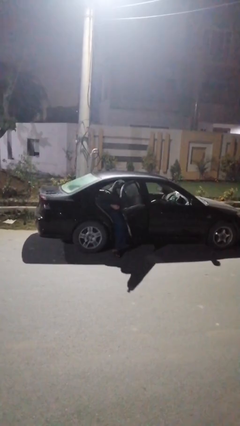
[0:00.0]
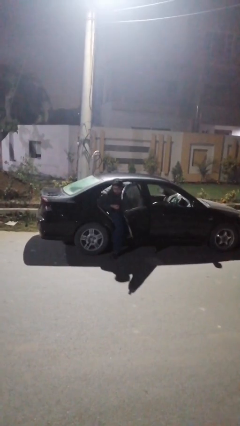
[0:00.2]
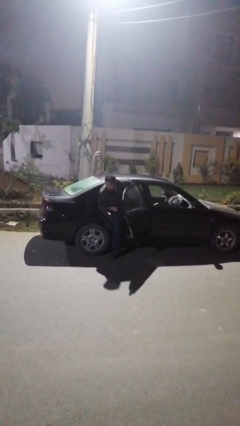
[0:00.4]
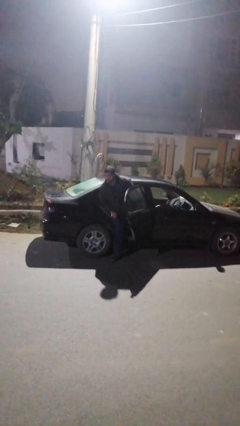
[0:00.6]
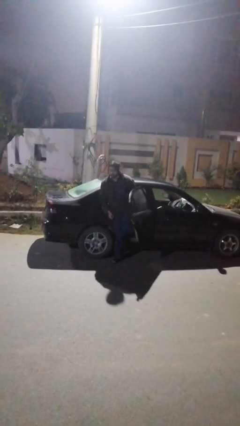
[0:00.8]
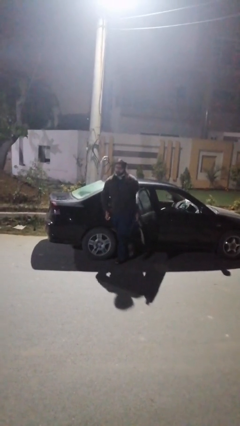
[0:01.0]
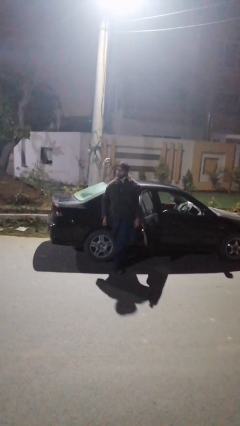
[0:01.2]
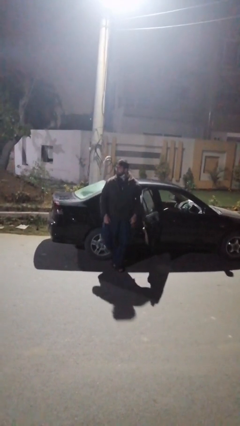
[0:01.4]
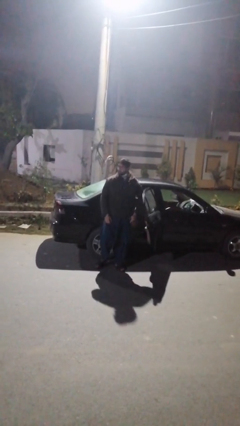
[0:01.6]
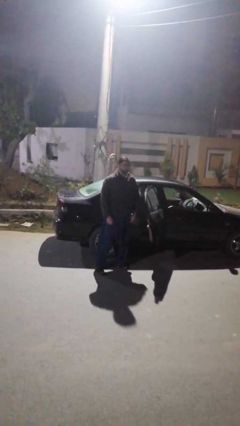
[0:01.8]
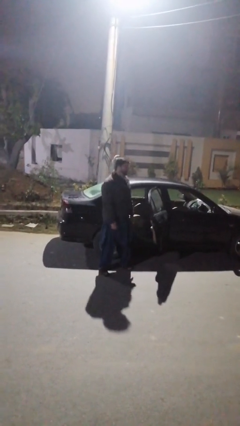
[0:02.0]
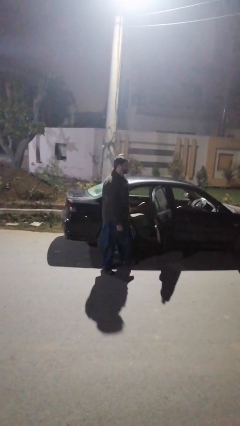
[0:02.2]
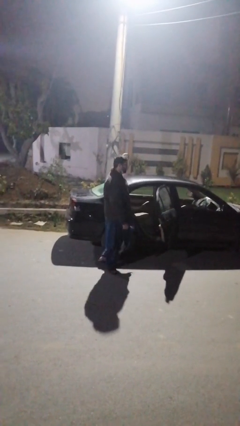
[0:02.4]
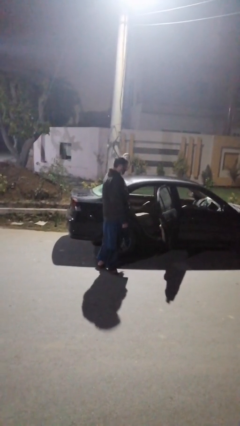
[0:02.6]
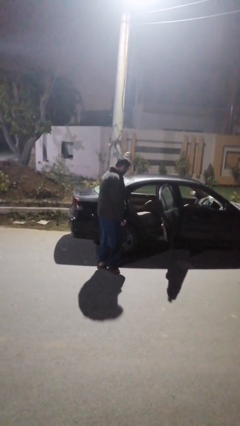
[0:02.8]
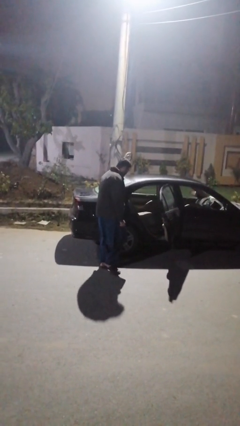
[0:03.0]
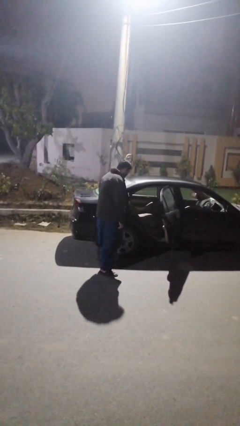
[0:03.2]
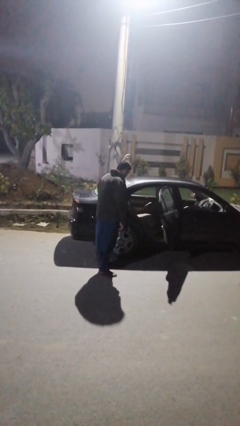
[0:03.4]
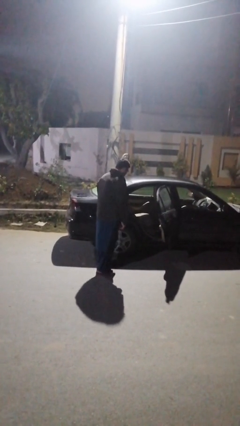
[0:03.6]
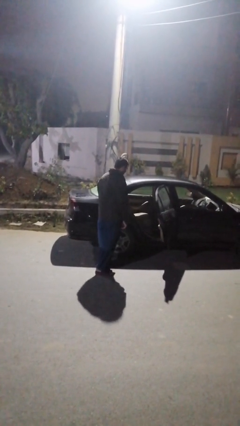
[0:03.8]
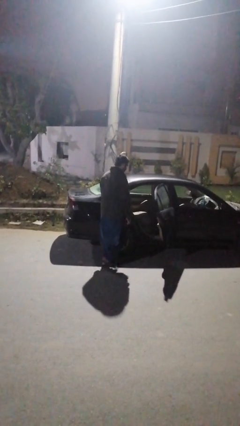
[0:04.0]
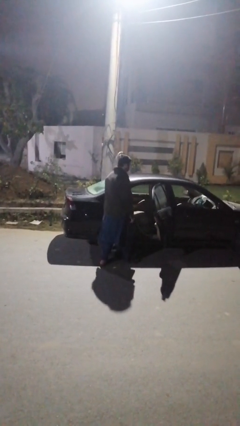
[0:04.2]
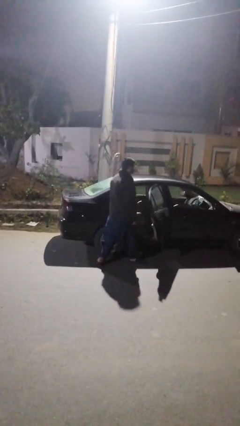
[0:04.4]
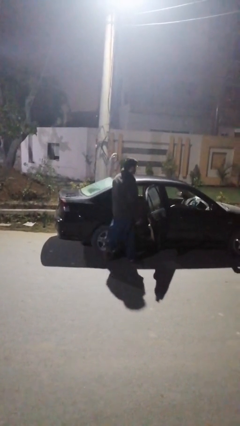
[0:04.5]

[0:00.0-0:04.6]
person exits car

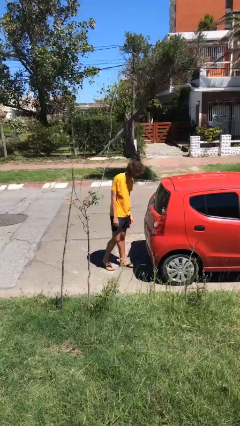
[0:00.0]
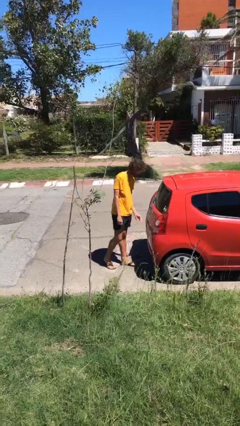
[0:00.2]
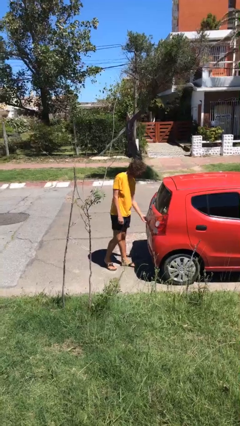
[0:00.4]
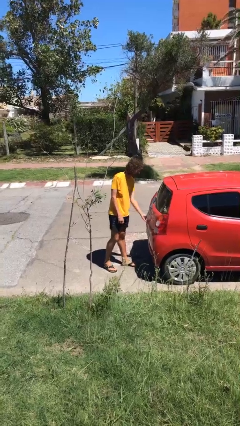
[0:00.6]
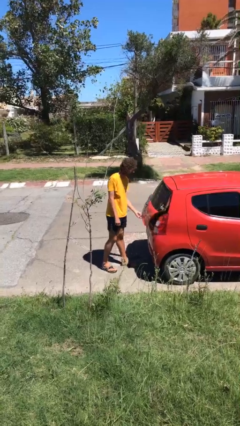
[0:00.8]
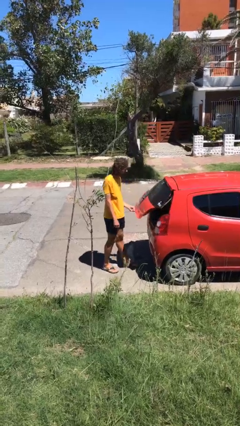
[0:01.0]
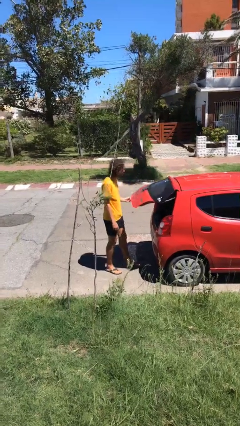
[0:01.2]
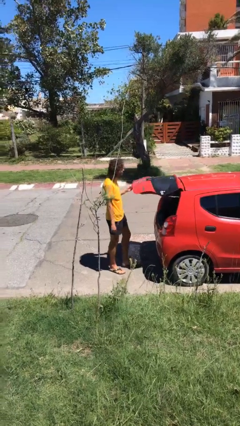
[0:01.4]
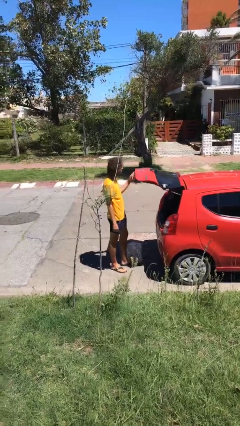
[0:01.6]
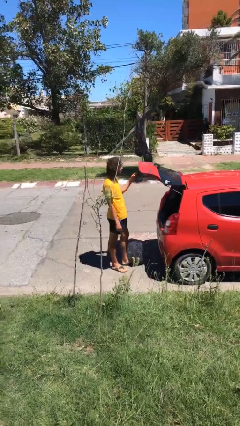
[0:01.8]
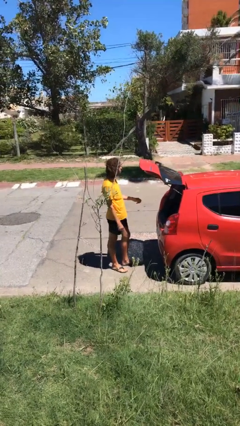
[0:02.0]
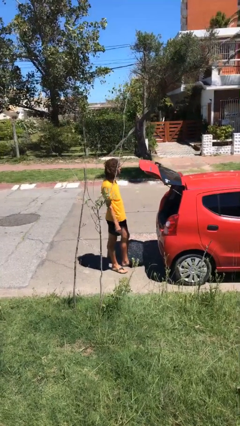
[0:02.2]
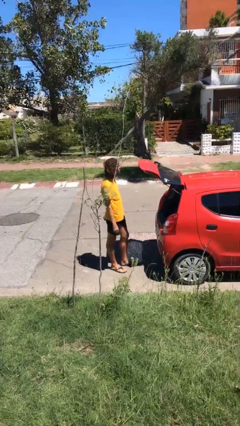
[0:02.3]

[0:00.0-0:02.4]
person opens car trunk

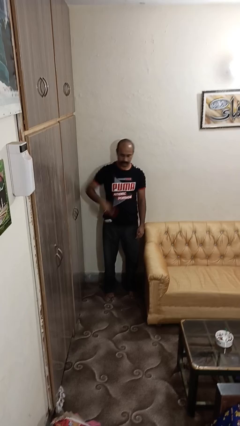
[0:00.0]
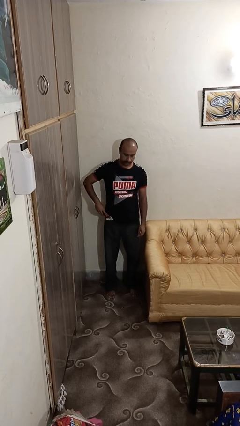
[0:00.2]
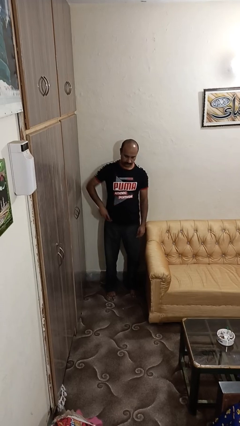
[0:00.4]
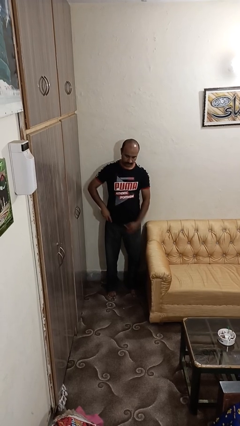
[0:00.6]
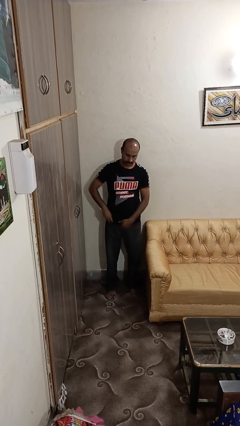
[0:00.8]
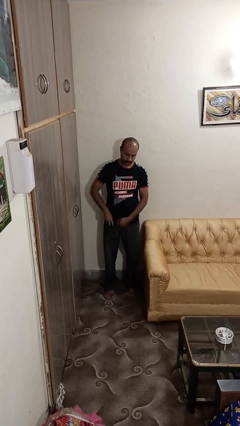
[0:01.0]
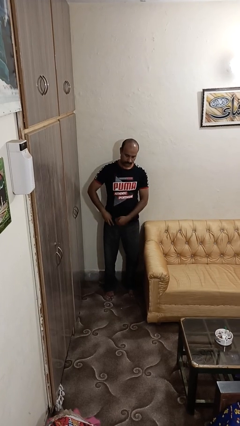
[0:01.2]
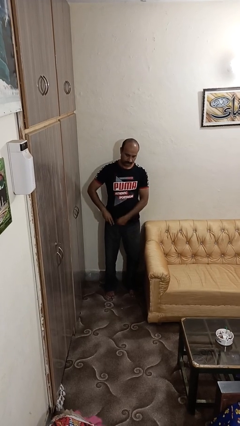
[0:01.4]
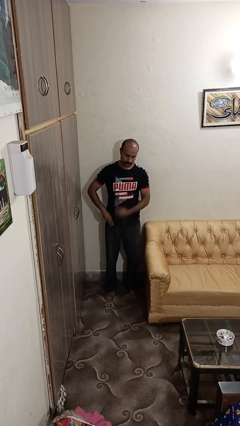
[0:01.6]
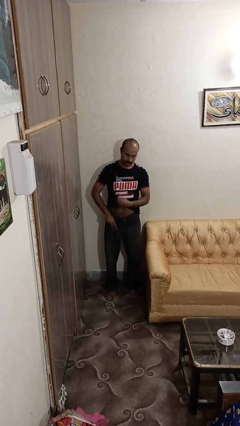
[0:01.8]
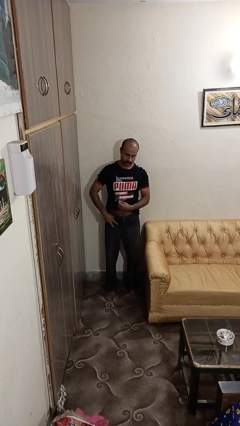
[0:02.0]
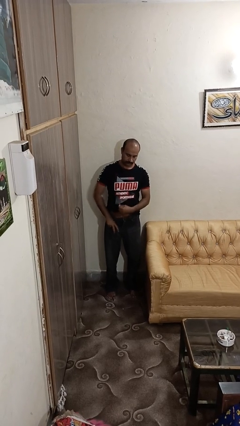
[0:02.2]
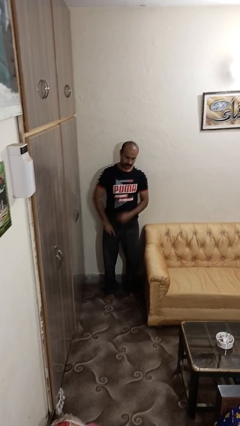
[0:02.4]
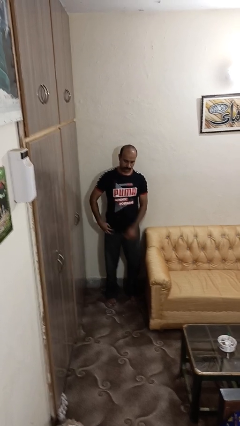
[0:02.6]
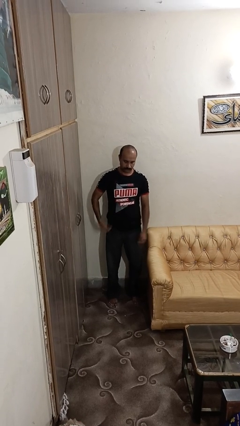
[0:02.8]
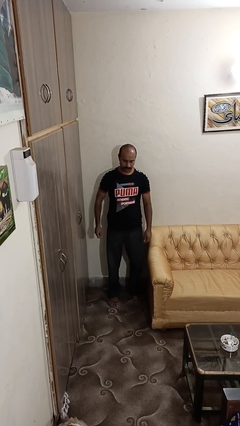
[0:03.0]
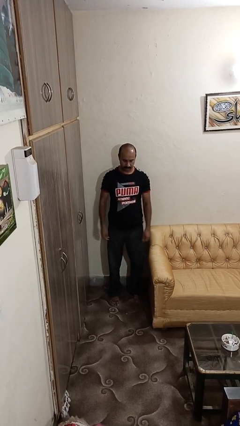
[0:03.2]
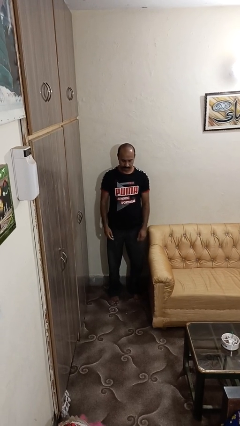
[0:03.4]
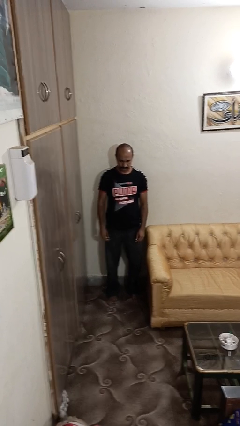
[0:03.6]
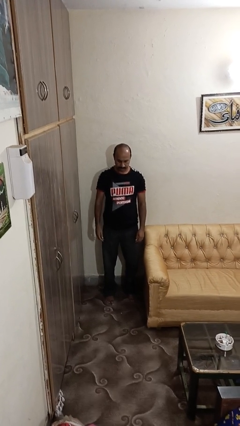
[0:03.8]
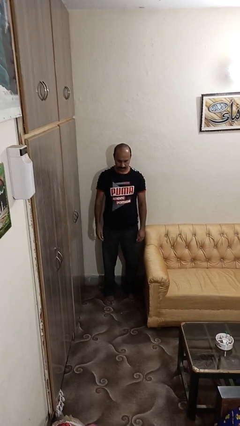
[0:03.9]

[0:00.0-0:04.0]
person puts phone into pocket

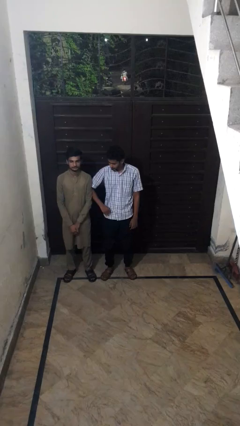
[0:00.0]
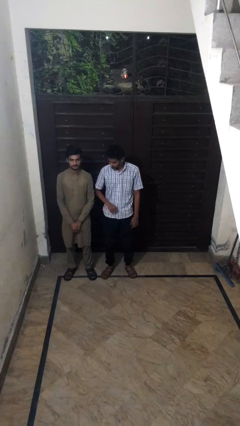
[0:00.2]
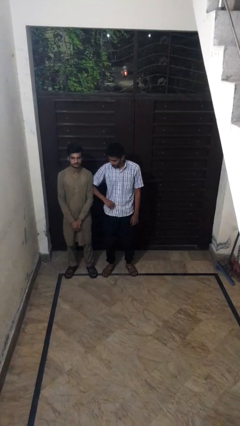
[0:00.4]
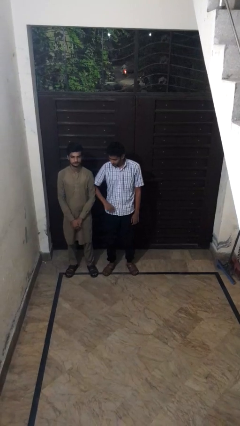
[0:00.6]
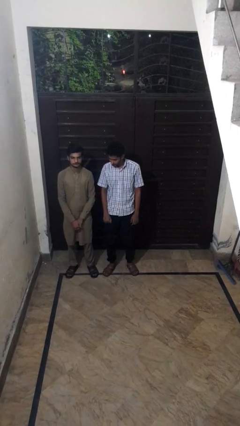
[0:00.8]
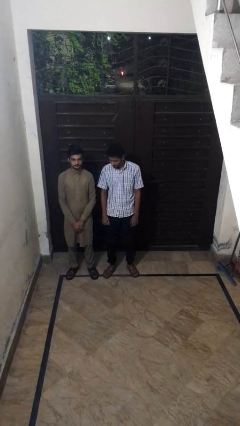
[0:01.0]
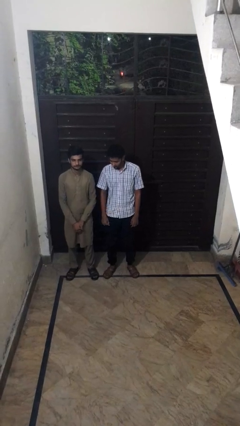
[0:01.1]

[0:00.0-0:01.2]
person nudges person with elbow

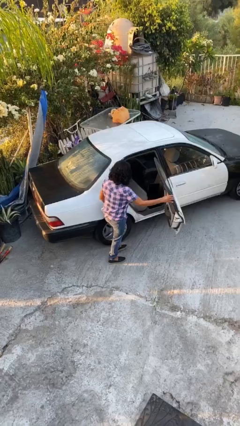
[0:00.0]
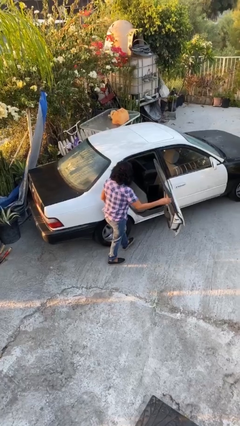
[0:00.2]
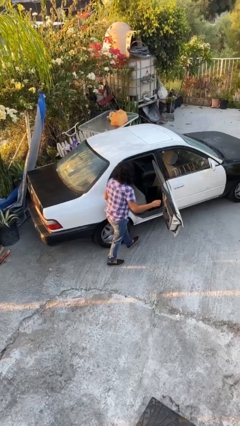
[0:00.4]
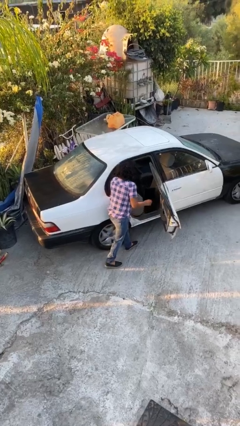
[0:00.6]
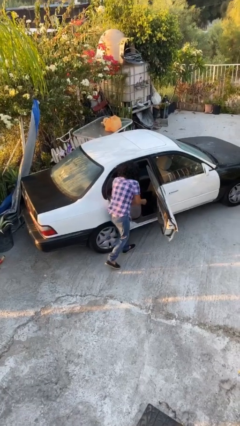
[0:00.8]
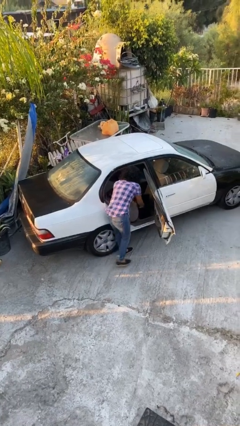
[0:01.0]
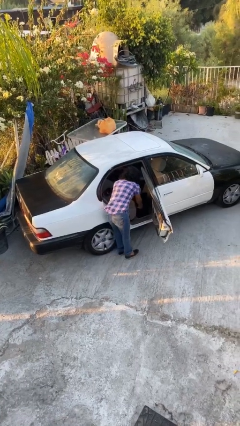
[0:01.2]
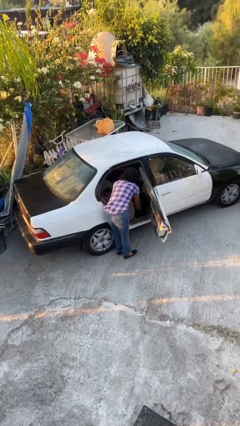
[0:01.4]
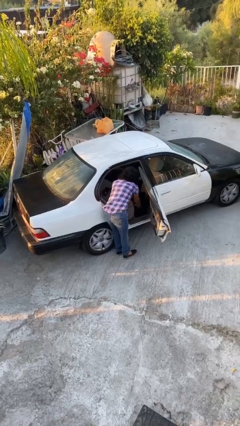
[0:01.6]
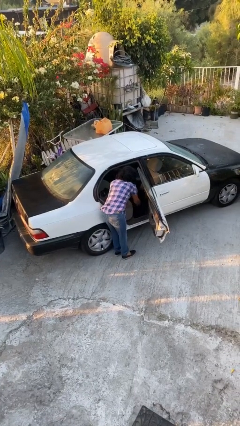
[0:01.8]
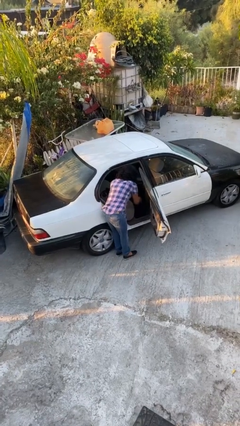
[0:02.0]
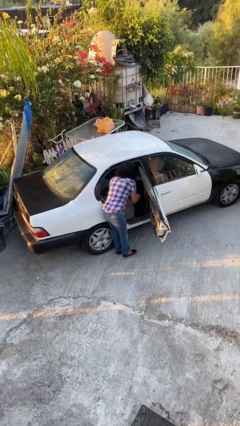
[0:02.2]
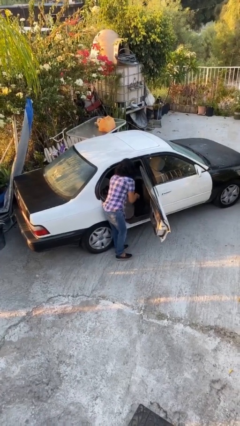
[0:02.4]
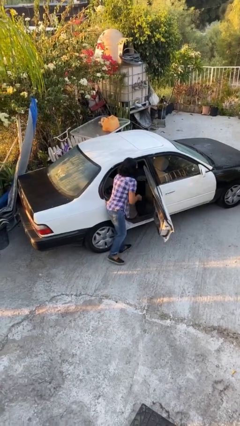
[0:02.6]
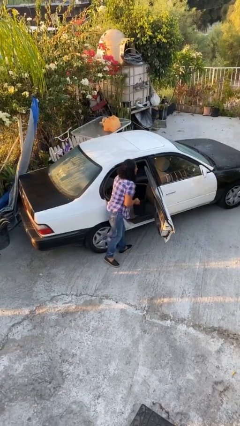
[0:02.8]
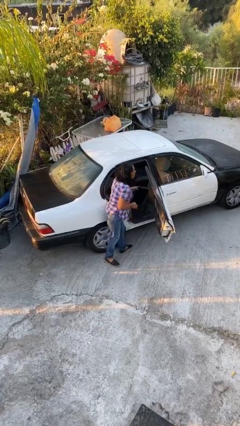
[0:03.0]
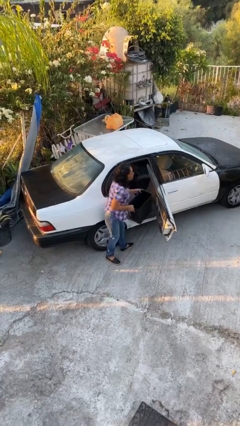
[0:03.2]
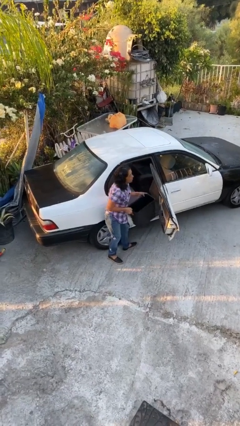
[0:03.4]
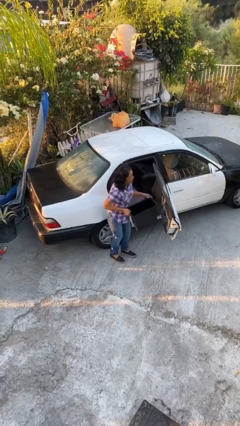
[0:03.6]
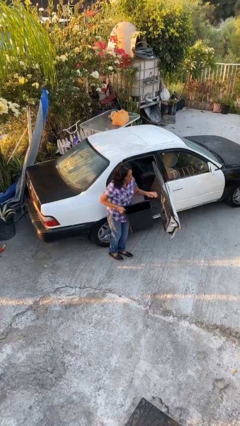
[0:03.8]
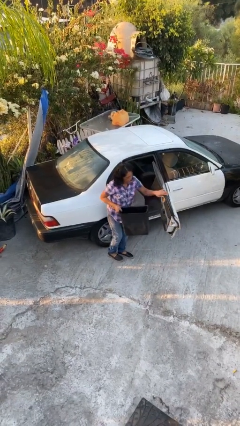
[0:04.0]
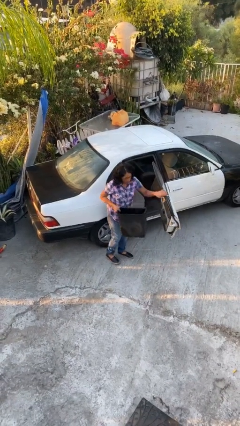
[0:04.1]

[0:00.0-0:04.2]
person unloads car

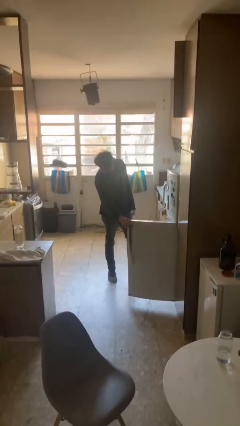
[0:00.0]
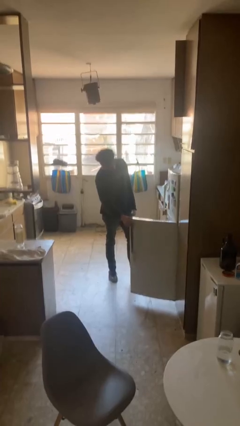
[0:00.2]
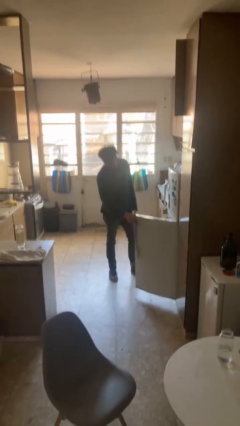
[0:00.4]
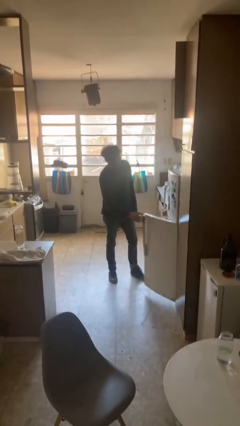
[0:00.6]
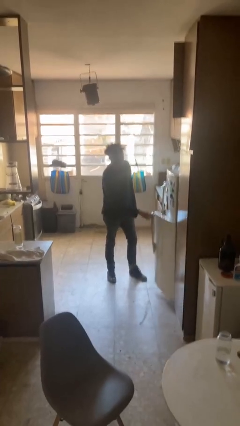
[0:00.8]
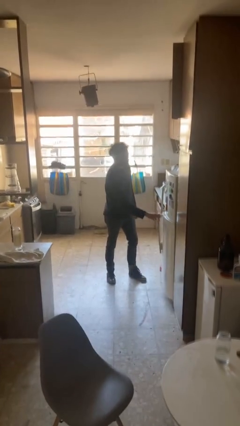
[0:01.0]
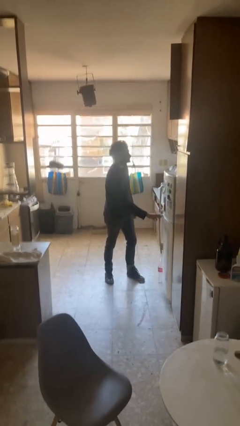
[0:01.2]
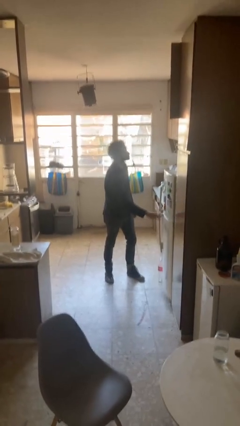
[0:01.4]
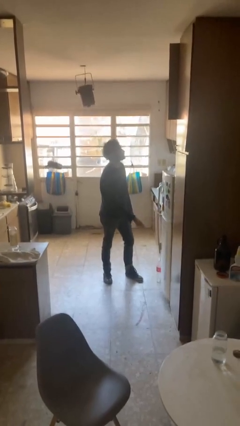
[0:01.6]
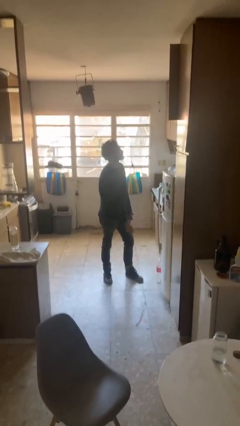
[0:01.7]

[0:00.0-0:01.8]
person closes refrigerator
